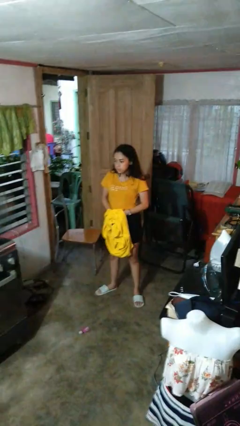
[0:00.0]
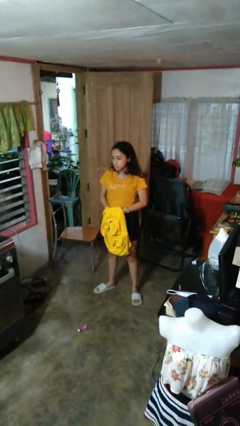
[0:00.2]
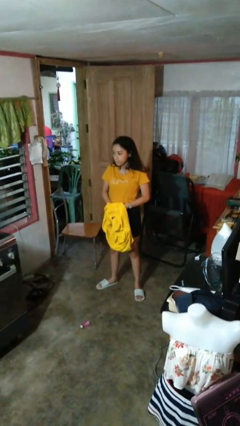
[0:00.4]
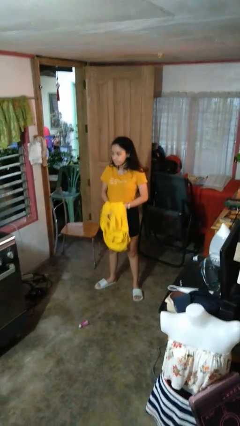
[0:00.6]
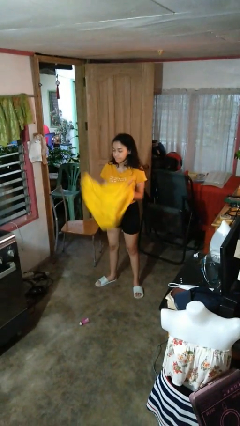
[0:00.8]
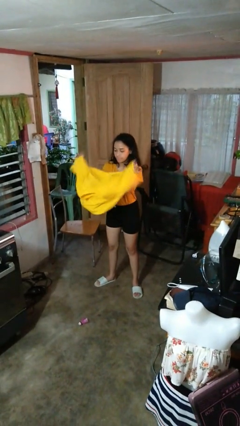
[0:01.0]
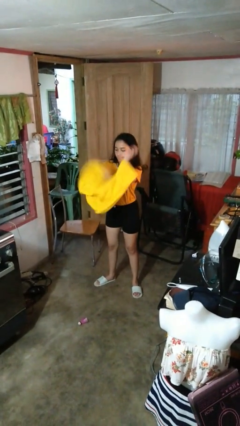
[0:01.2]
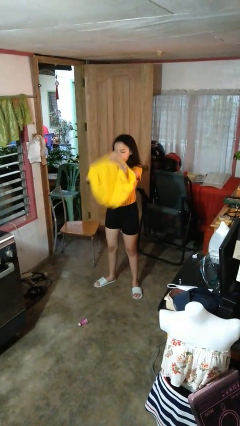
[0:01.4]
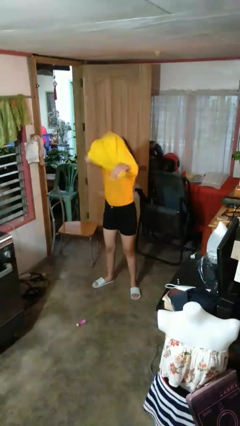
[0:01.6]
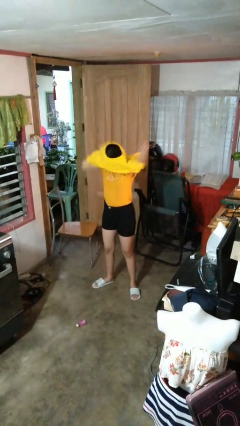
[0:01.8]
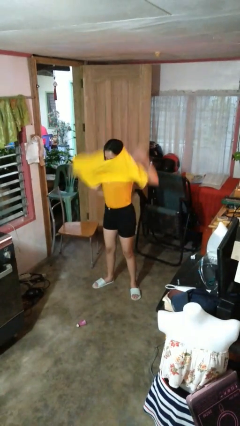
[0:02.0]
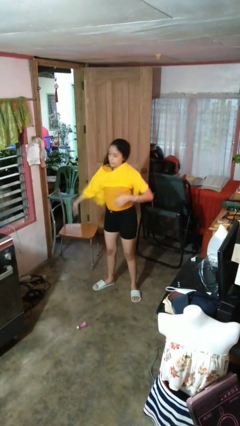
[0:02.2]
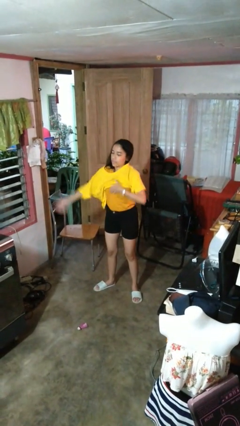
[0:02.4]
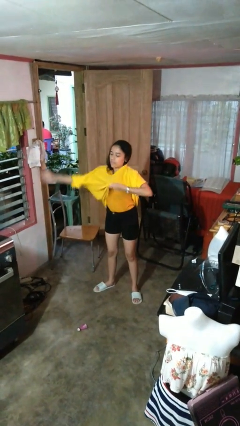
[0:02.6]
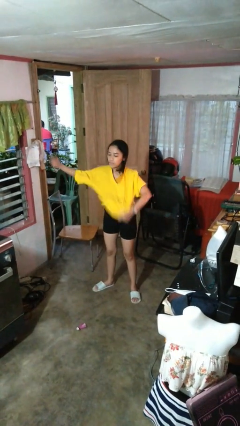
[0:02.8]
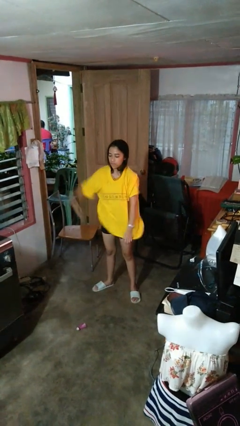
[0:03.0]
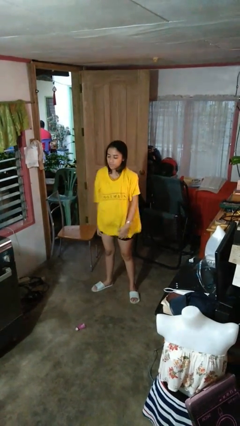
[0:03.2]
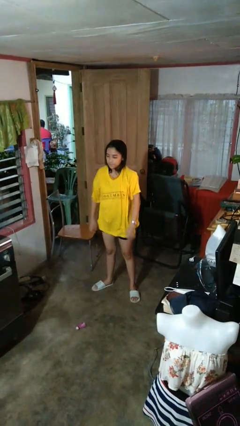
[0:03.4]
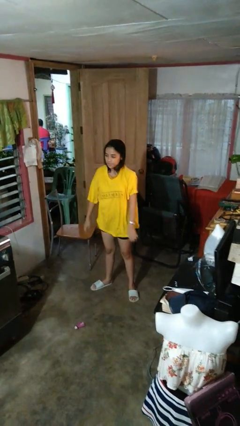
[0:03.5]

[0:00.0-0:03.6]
person puts on shirt

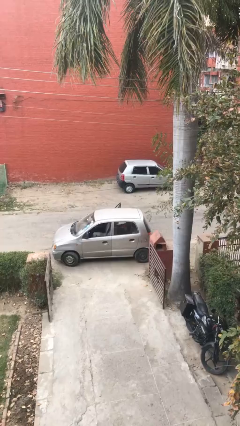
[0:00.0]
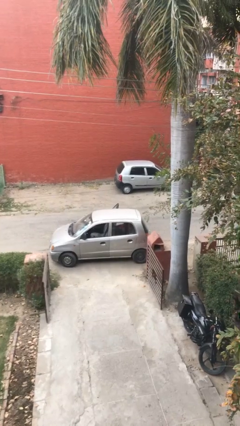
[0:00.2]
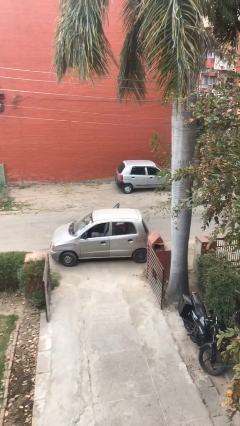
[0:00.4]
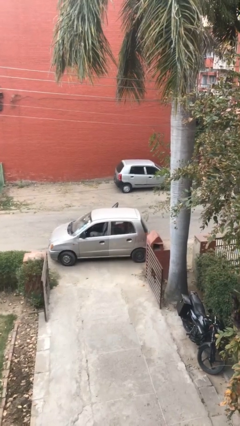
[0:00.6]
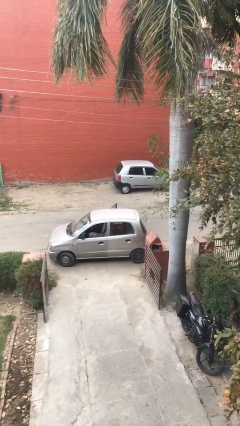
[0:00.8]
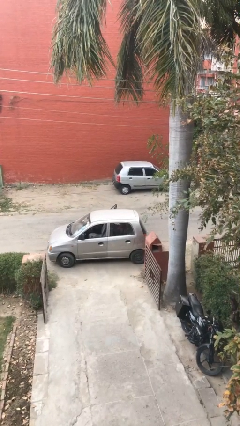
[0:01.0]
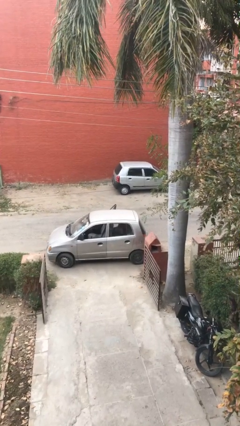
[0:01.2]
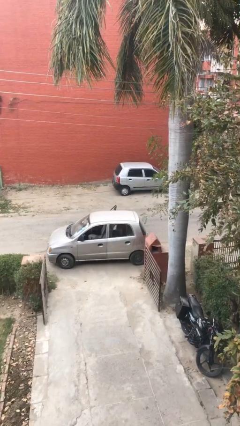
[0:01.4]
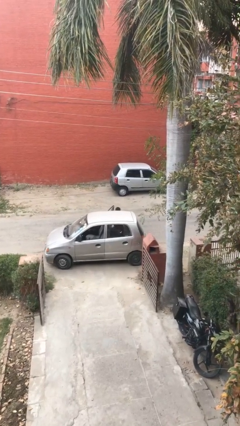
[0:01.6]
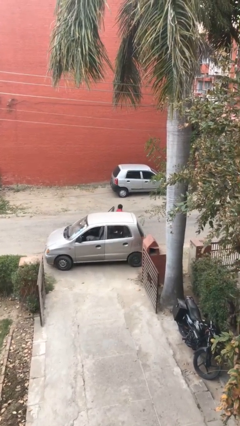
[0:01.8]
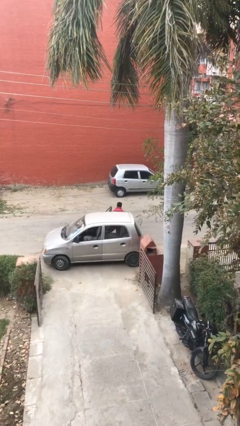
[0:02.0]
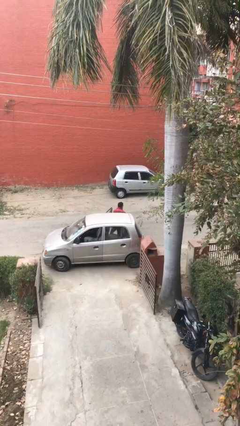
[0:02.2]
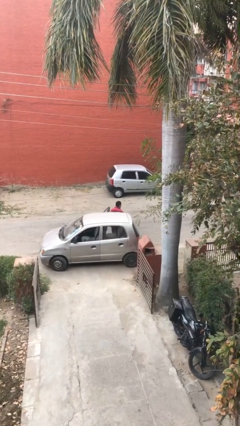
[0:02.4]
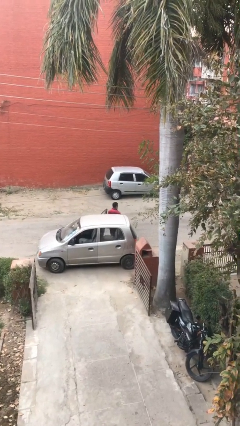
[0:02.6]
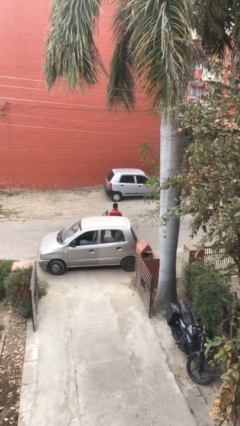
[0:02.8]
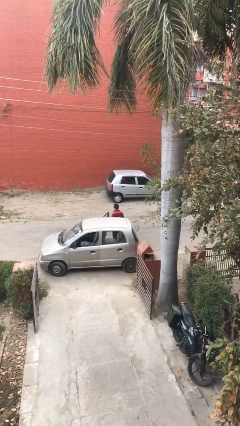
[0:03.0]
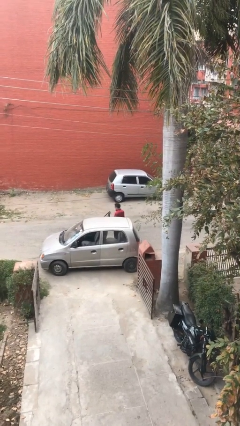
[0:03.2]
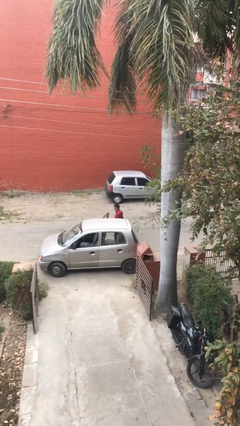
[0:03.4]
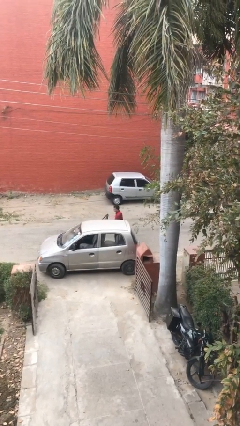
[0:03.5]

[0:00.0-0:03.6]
person exits car

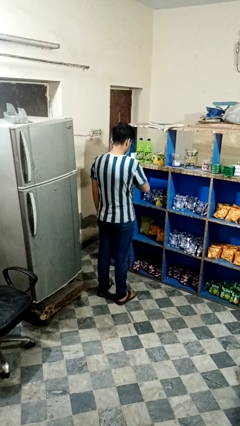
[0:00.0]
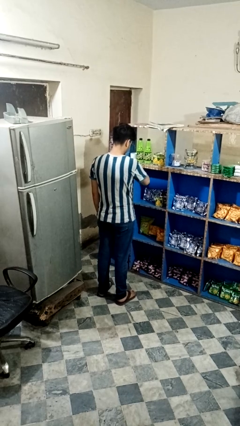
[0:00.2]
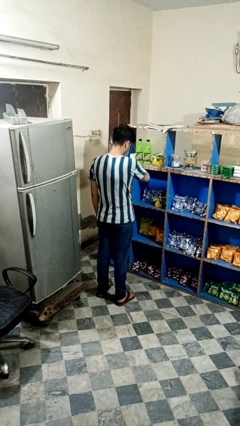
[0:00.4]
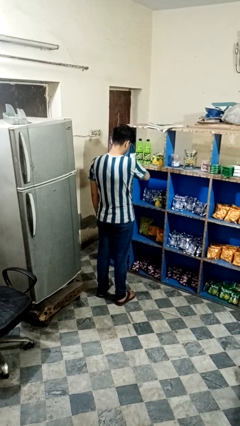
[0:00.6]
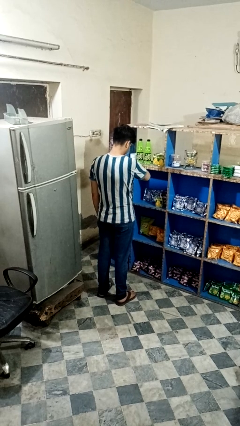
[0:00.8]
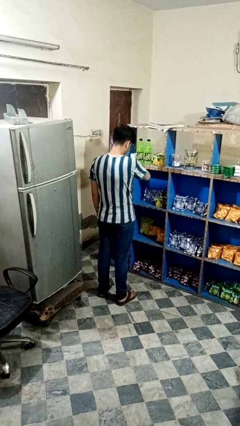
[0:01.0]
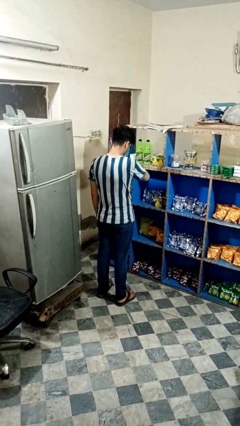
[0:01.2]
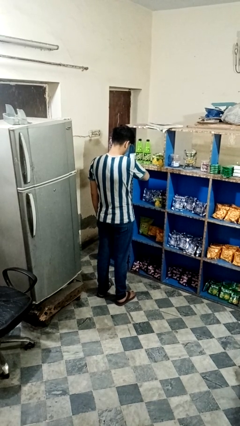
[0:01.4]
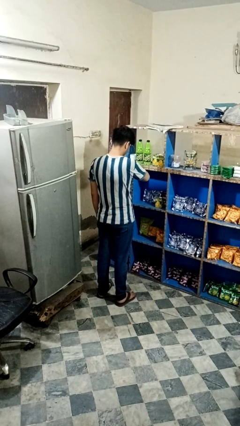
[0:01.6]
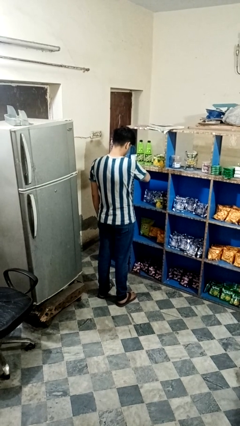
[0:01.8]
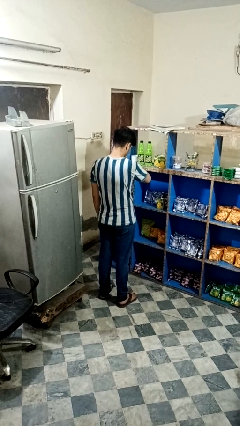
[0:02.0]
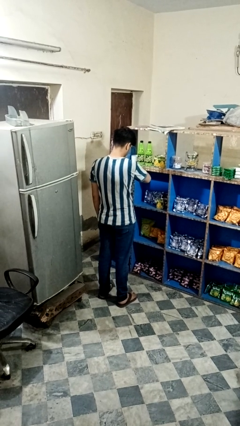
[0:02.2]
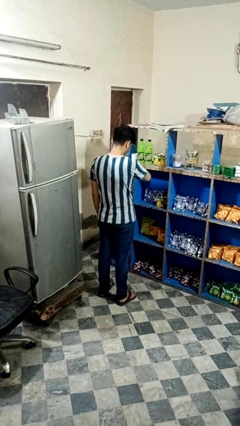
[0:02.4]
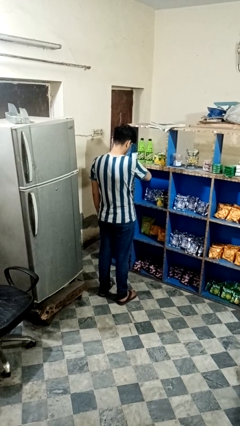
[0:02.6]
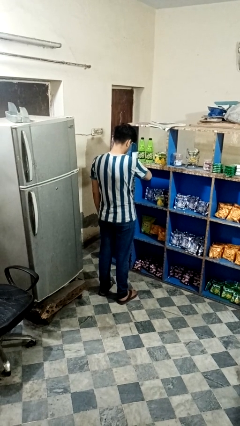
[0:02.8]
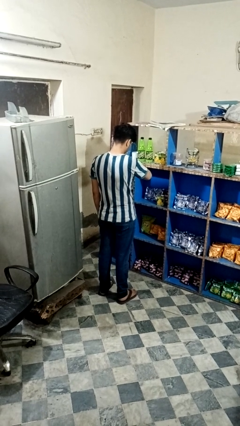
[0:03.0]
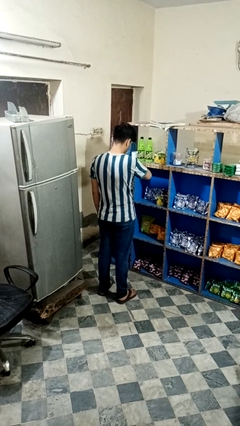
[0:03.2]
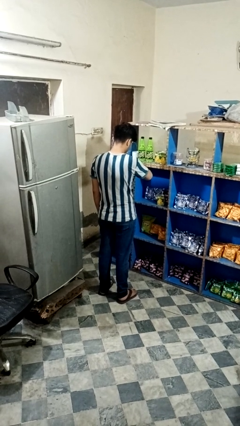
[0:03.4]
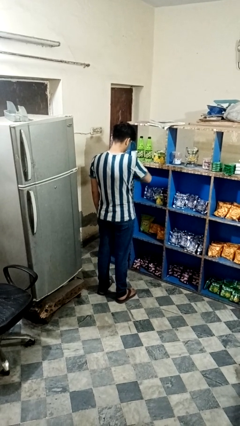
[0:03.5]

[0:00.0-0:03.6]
person looks at wristwatch

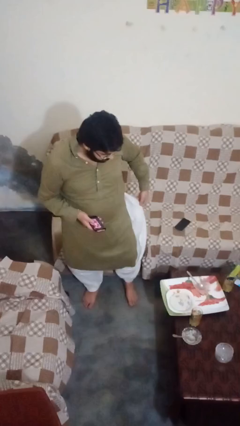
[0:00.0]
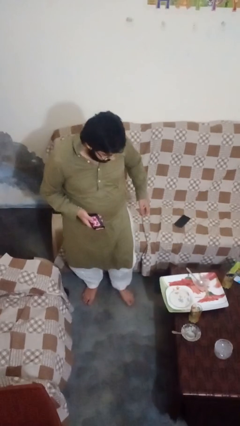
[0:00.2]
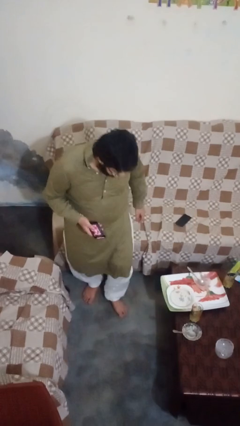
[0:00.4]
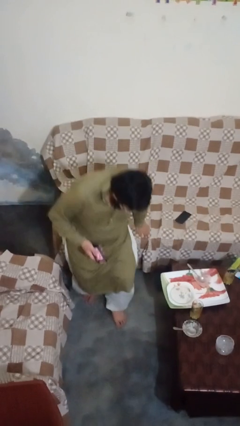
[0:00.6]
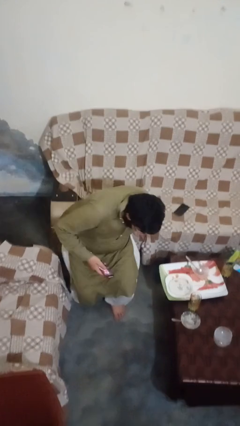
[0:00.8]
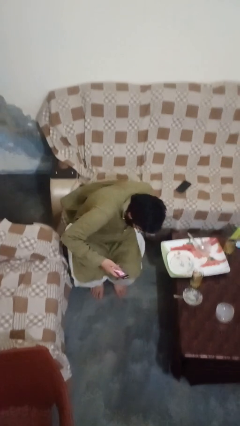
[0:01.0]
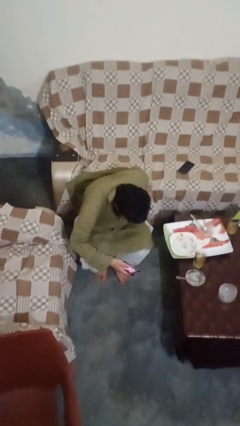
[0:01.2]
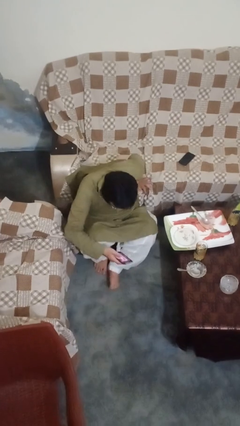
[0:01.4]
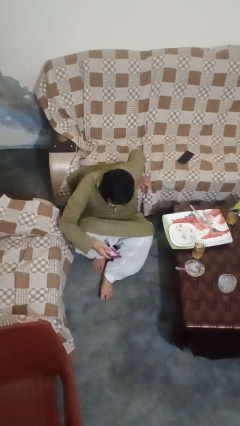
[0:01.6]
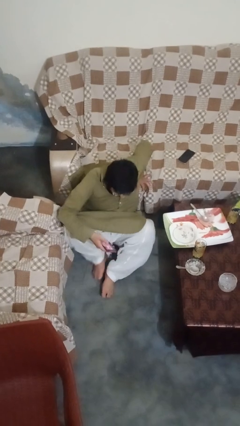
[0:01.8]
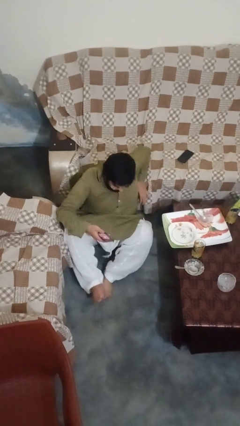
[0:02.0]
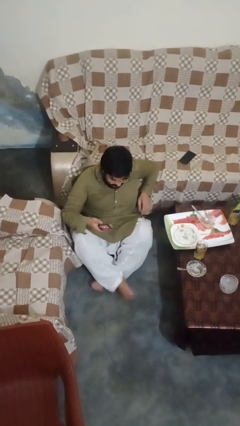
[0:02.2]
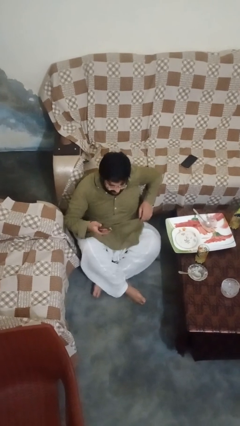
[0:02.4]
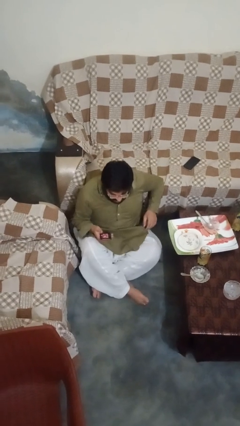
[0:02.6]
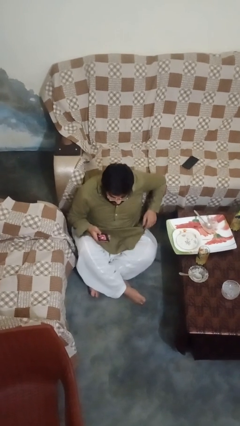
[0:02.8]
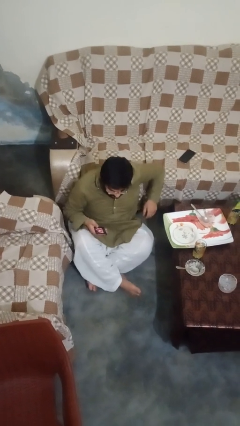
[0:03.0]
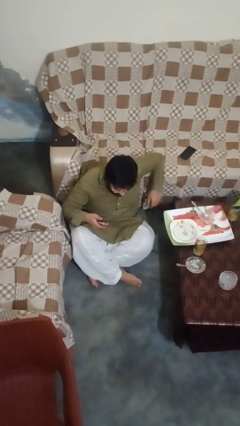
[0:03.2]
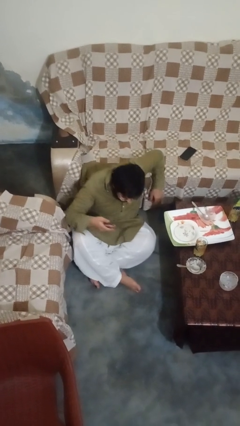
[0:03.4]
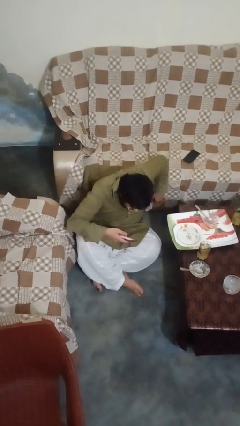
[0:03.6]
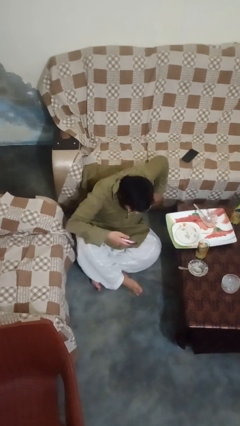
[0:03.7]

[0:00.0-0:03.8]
person sits crisscross

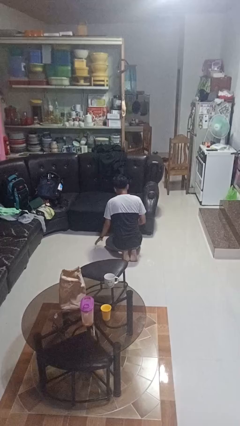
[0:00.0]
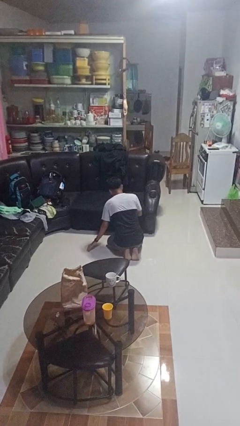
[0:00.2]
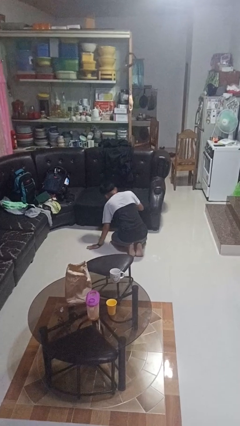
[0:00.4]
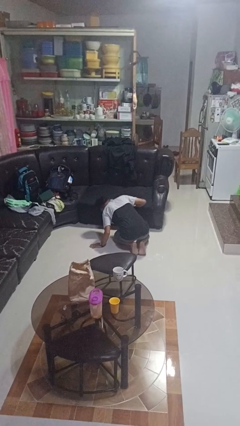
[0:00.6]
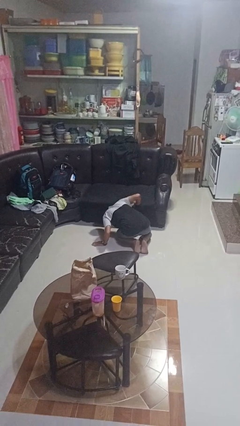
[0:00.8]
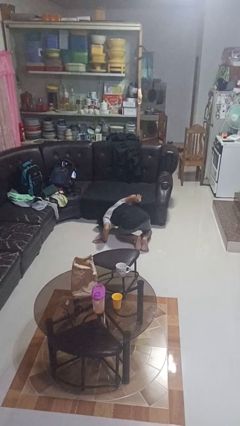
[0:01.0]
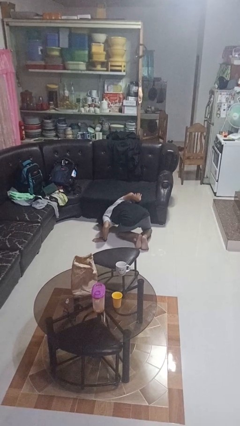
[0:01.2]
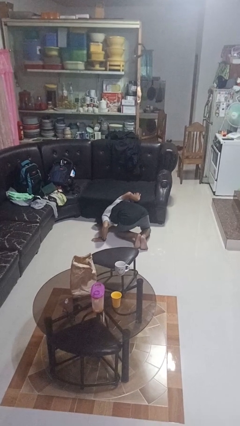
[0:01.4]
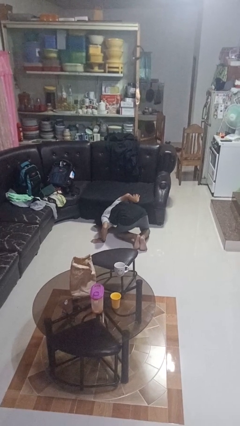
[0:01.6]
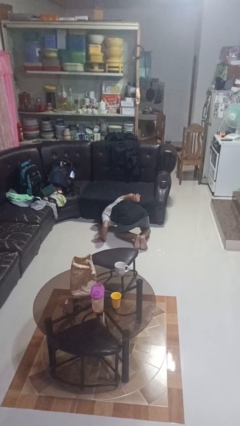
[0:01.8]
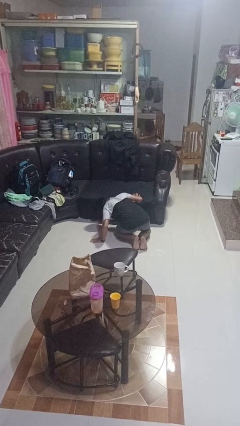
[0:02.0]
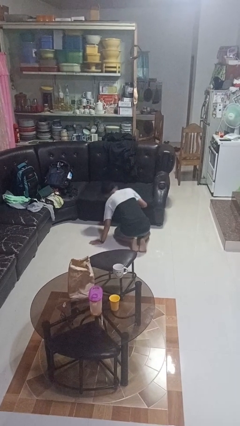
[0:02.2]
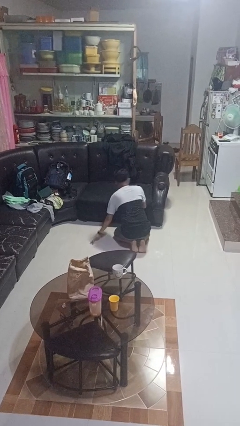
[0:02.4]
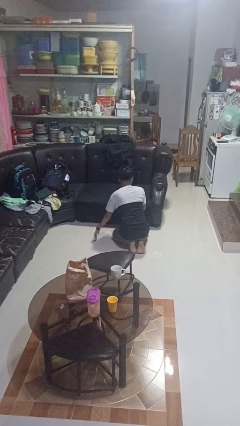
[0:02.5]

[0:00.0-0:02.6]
person searches under couch

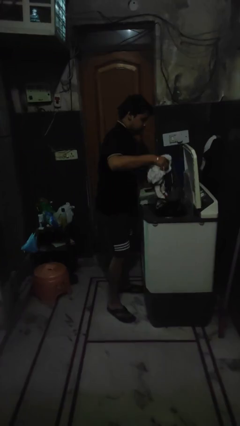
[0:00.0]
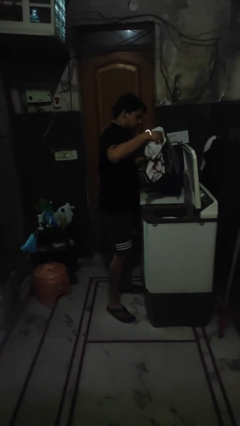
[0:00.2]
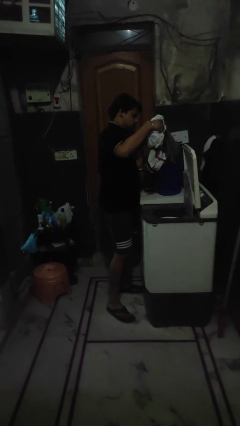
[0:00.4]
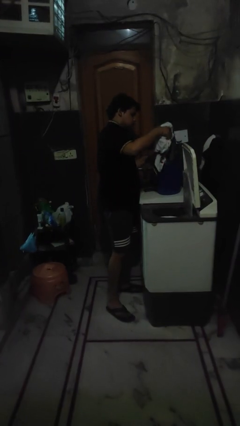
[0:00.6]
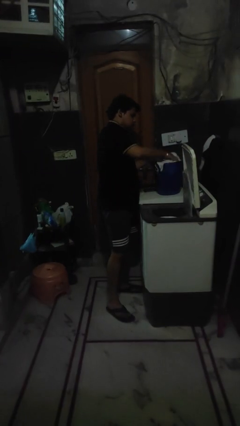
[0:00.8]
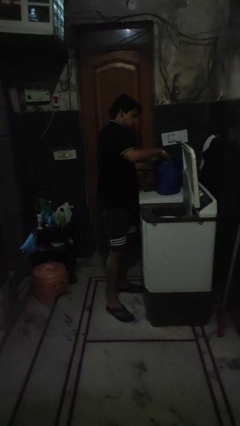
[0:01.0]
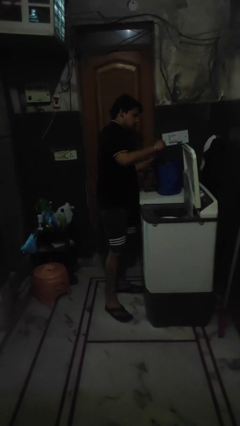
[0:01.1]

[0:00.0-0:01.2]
person unloads clotheswasher
